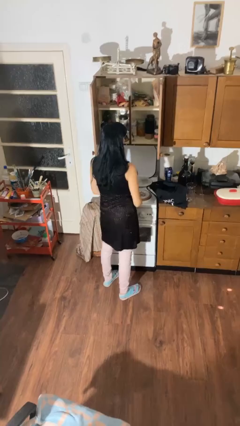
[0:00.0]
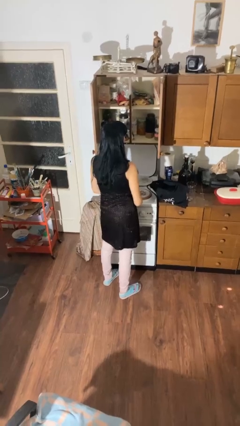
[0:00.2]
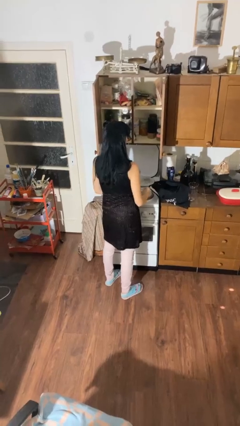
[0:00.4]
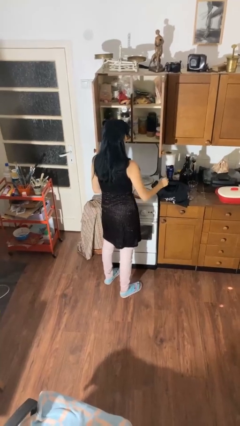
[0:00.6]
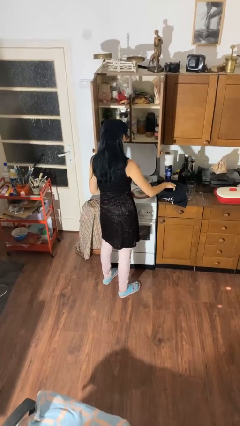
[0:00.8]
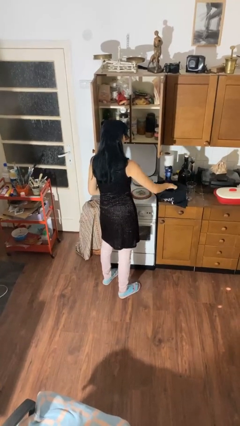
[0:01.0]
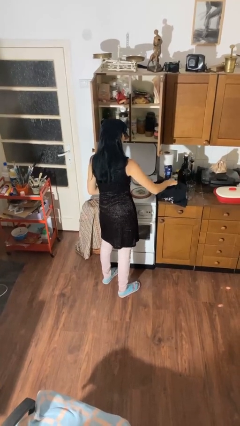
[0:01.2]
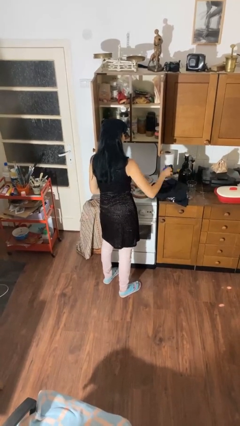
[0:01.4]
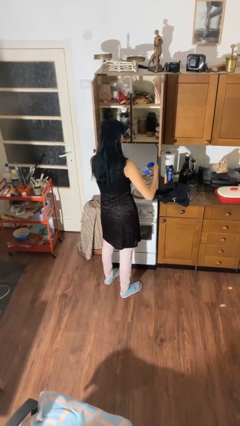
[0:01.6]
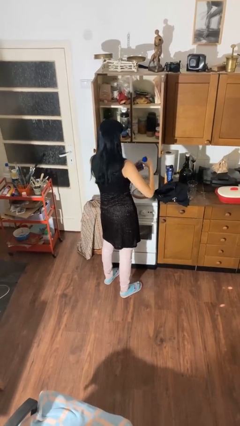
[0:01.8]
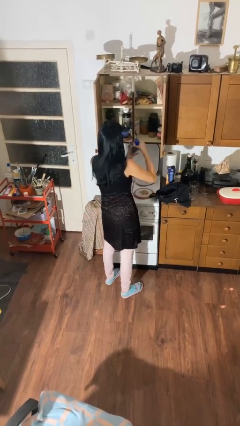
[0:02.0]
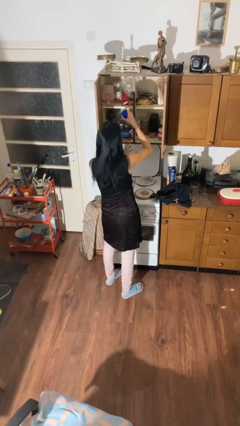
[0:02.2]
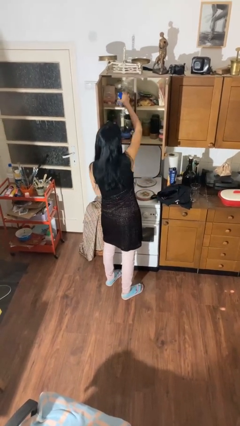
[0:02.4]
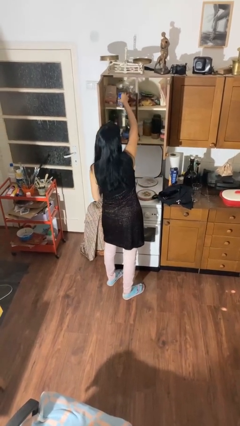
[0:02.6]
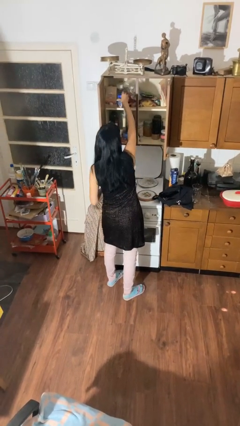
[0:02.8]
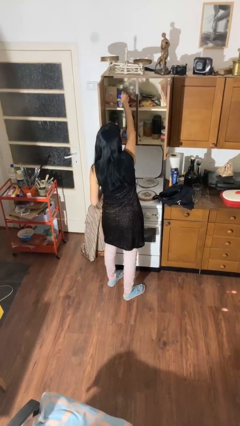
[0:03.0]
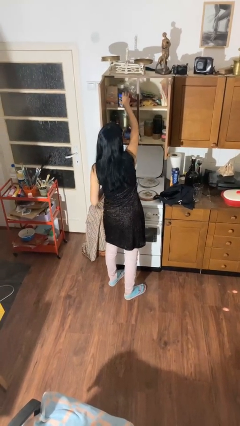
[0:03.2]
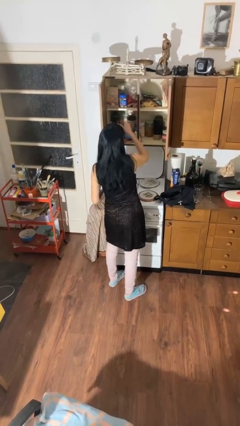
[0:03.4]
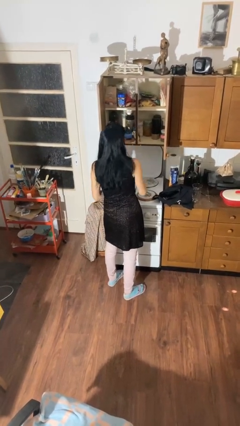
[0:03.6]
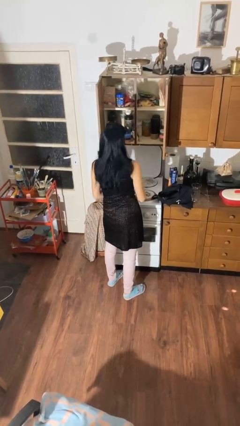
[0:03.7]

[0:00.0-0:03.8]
person loads groceries into cabinet

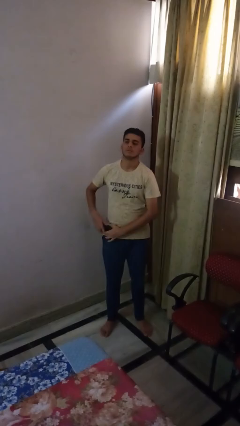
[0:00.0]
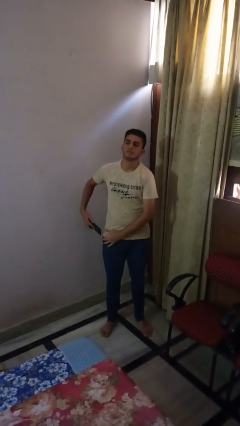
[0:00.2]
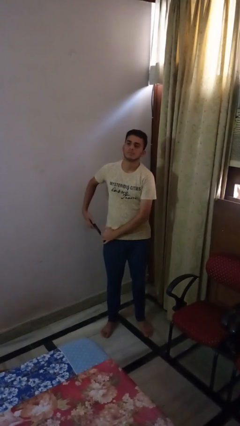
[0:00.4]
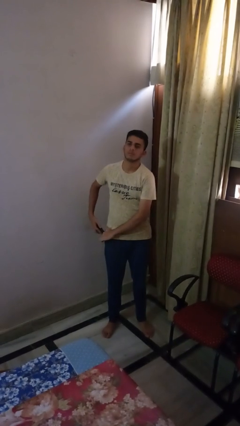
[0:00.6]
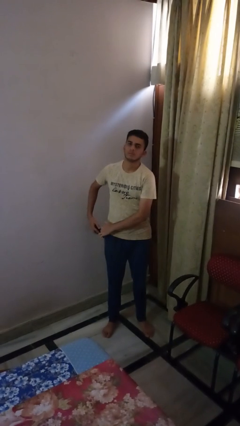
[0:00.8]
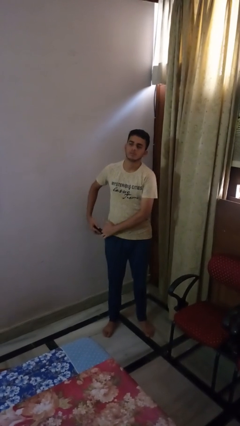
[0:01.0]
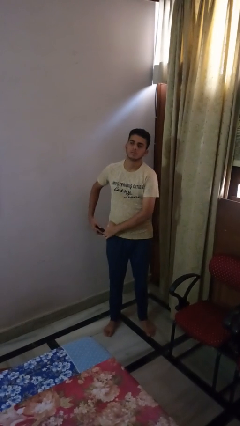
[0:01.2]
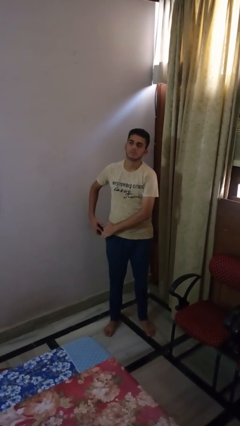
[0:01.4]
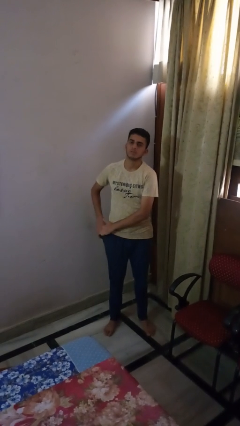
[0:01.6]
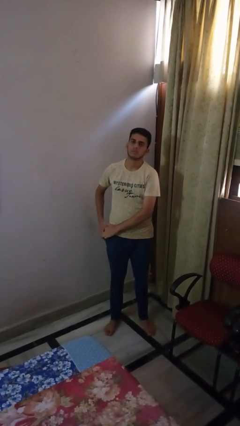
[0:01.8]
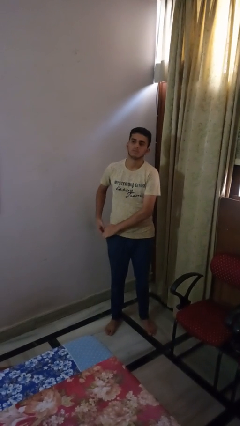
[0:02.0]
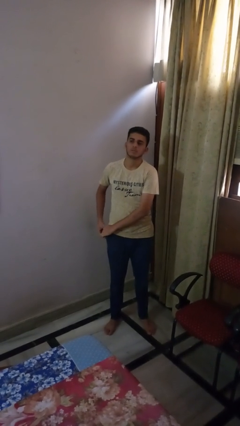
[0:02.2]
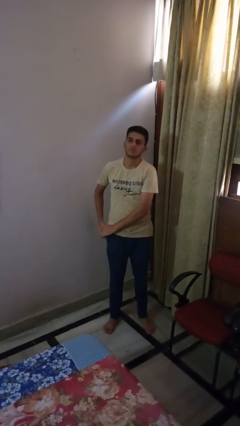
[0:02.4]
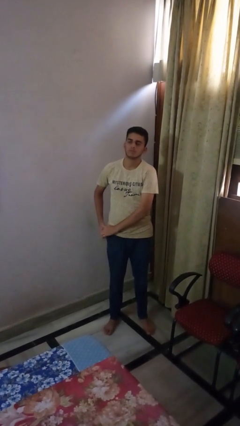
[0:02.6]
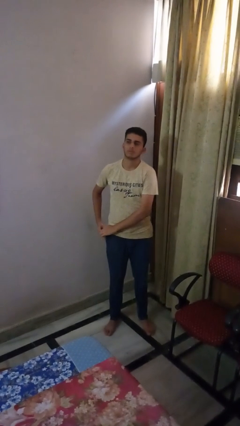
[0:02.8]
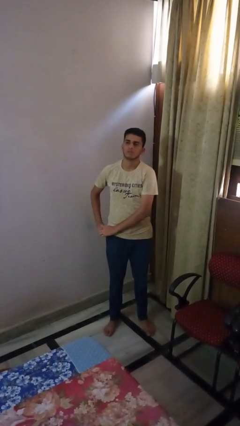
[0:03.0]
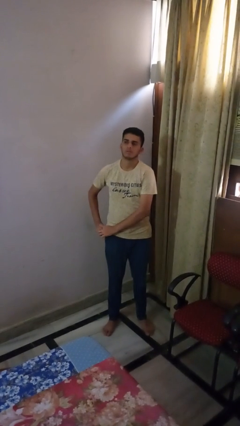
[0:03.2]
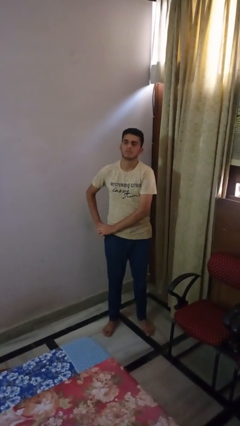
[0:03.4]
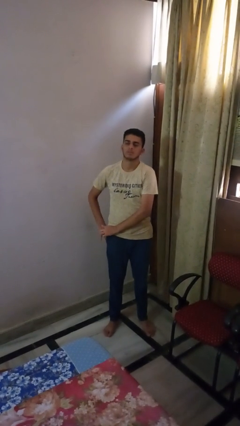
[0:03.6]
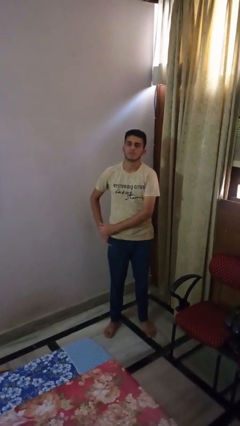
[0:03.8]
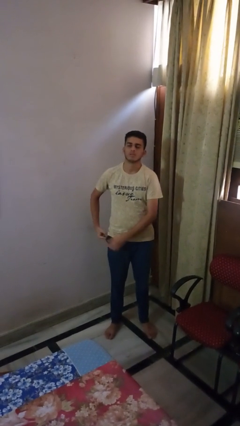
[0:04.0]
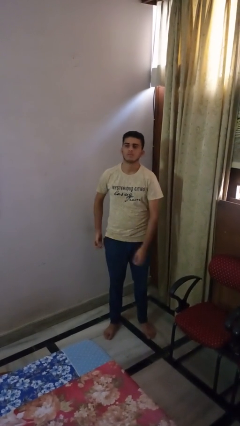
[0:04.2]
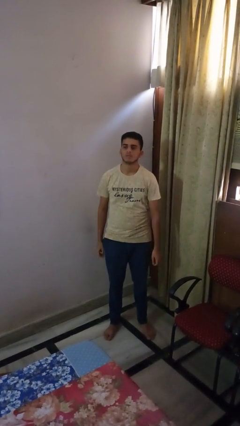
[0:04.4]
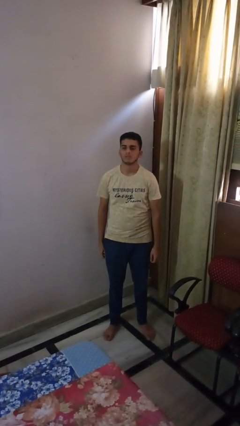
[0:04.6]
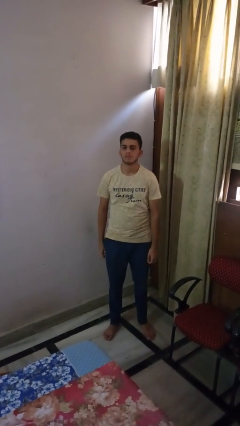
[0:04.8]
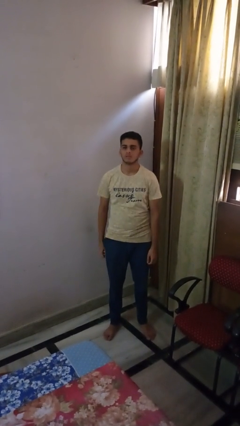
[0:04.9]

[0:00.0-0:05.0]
person puts phone into pocket

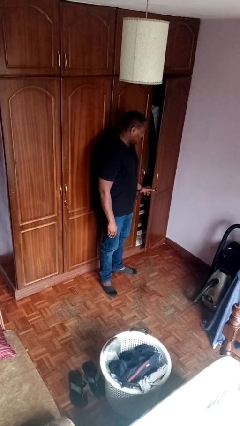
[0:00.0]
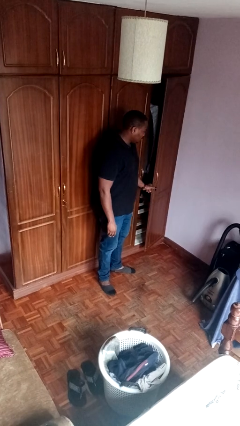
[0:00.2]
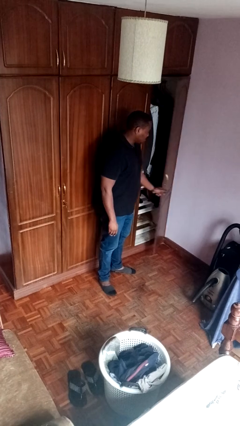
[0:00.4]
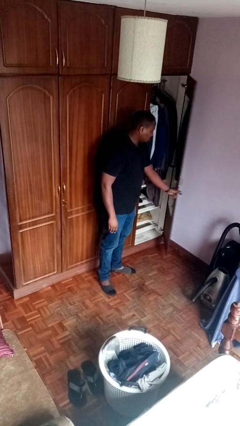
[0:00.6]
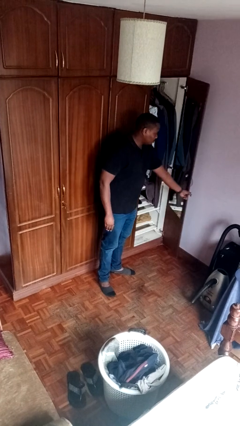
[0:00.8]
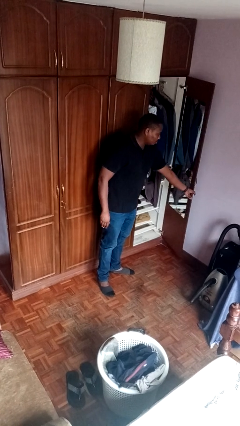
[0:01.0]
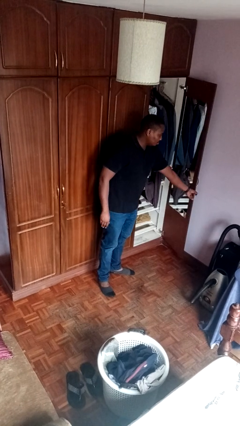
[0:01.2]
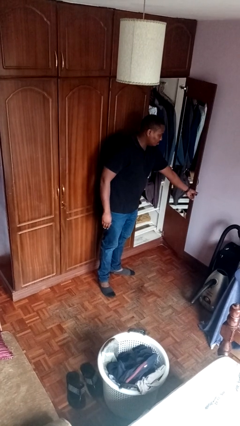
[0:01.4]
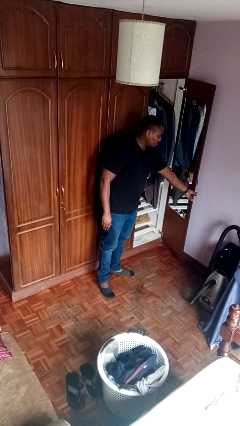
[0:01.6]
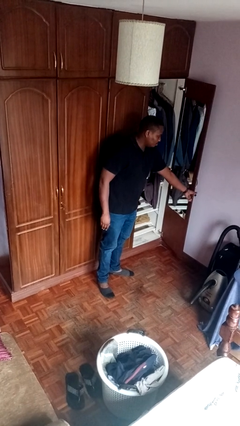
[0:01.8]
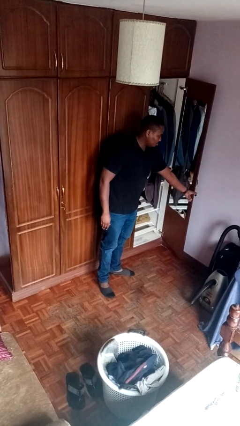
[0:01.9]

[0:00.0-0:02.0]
person opens closet door

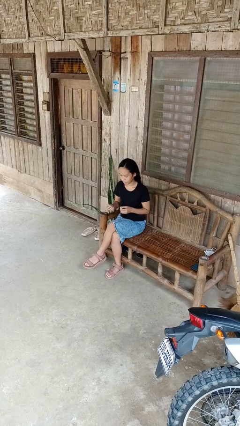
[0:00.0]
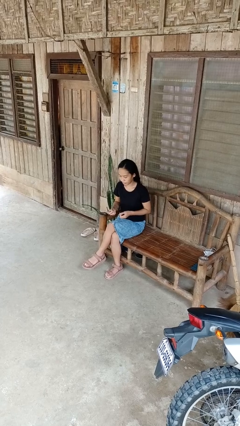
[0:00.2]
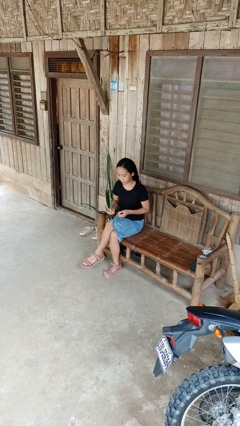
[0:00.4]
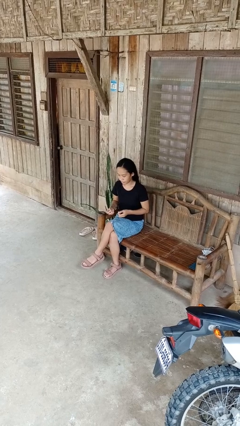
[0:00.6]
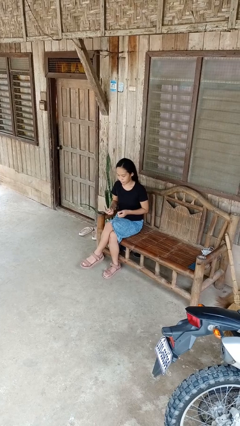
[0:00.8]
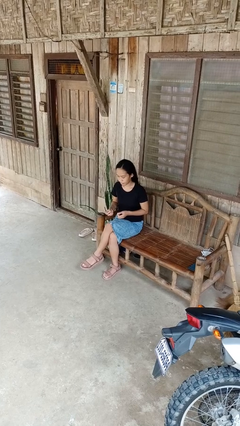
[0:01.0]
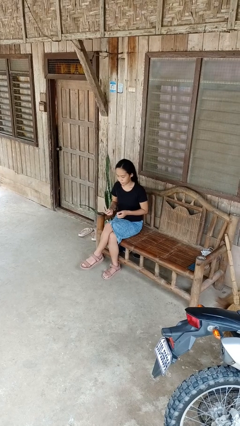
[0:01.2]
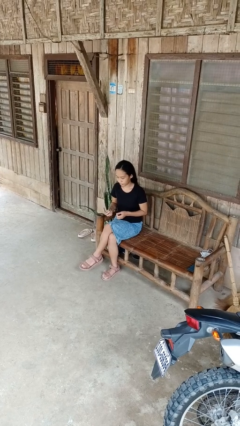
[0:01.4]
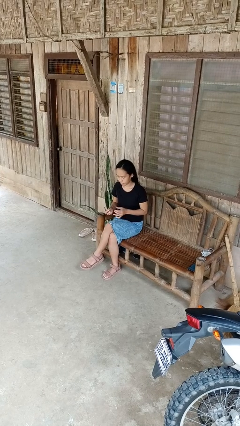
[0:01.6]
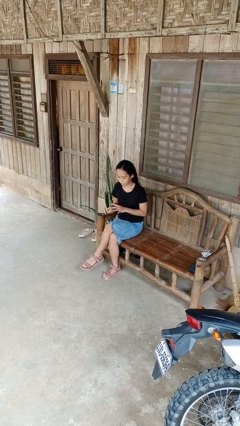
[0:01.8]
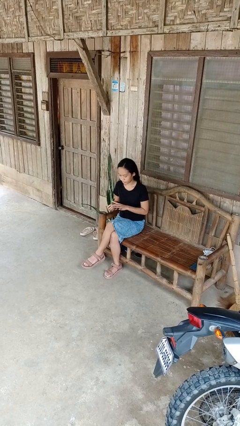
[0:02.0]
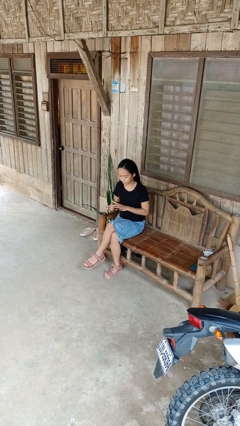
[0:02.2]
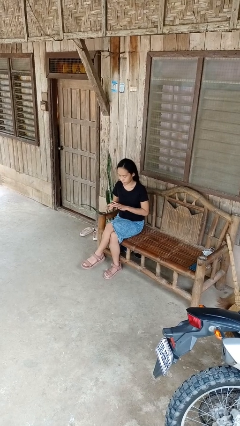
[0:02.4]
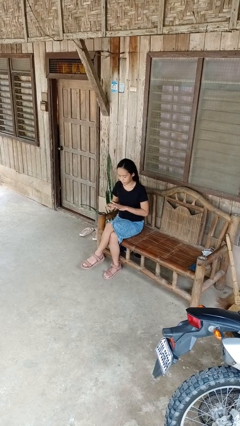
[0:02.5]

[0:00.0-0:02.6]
person takes off ring

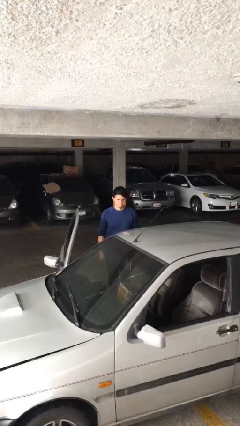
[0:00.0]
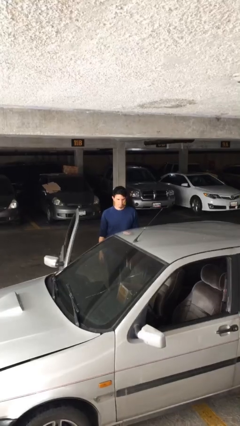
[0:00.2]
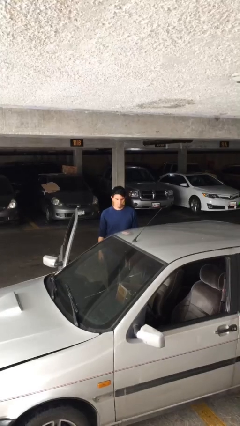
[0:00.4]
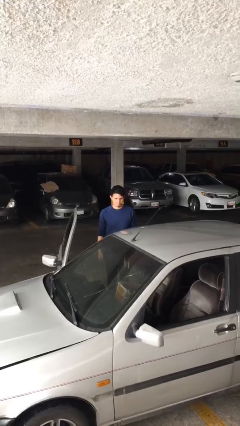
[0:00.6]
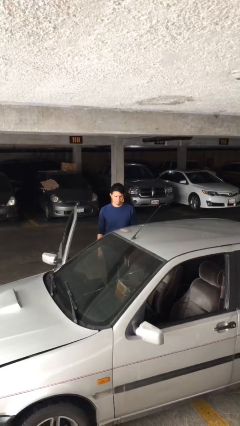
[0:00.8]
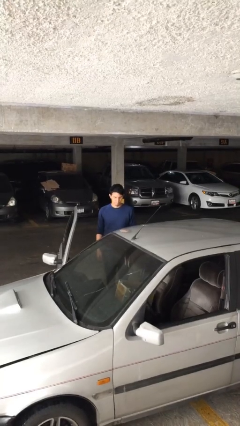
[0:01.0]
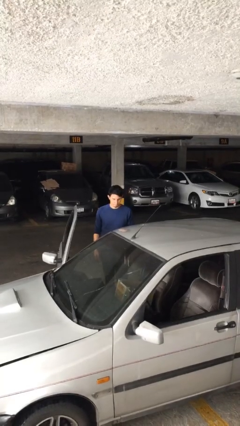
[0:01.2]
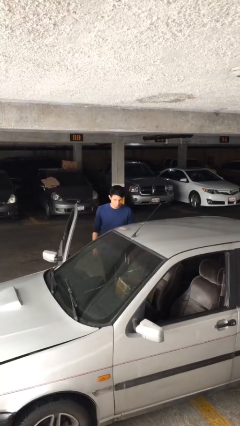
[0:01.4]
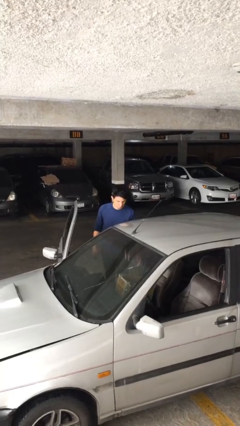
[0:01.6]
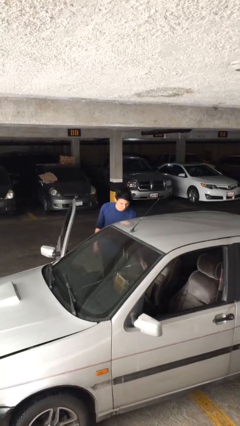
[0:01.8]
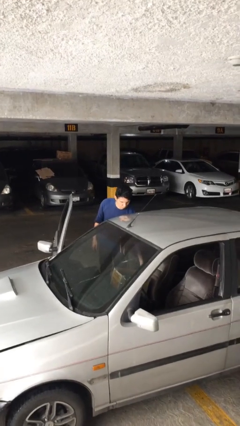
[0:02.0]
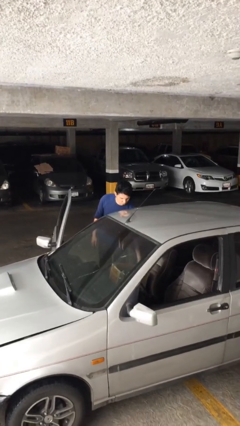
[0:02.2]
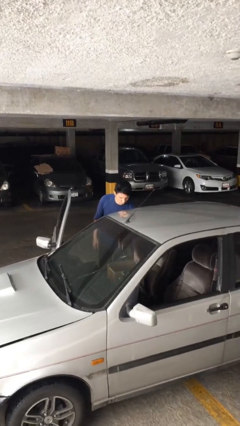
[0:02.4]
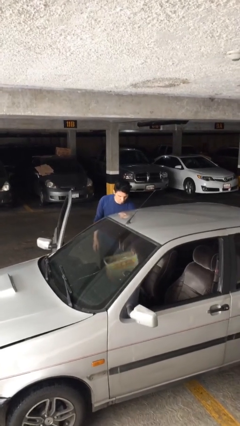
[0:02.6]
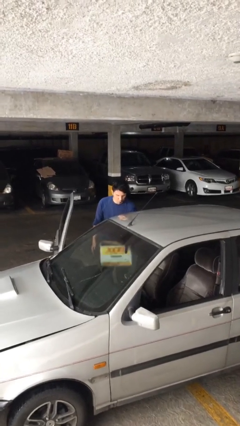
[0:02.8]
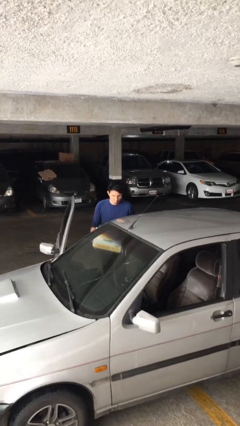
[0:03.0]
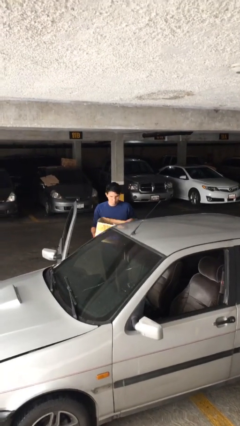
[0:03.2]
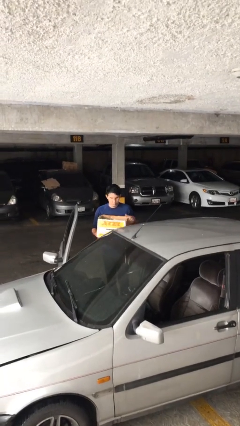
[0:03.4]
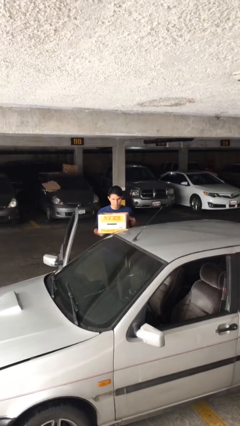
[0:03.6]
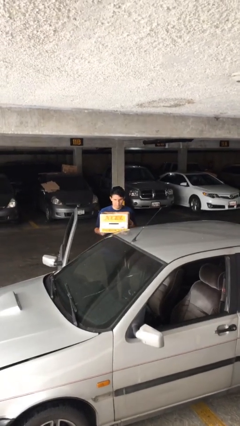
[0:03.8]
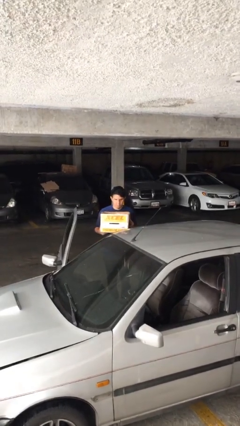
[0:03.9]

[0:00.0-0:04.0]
person unloads car
